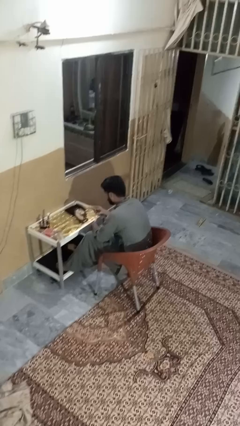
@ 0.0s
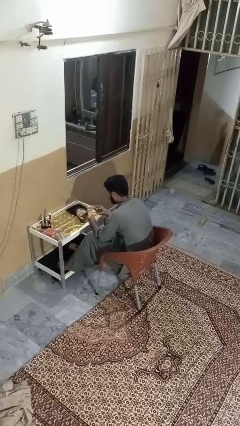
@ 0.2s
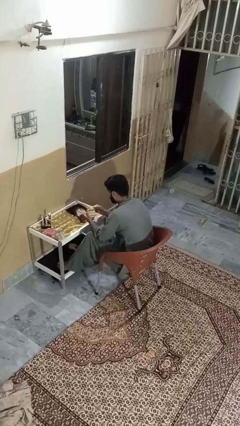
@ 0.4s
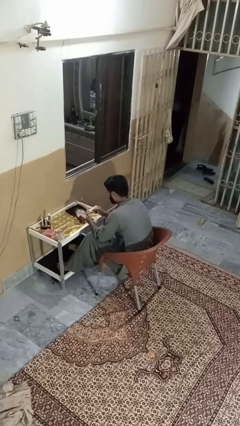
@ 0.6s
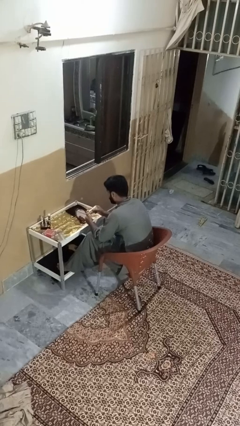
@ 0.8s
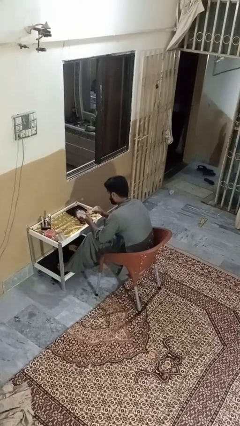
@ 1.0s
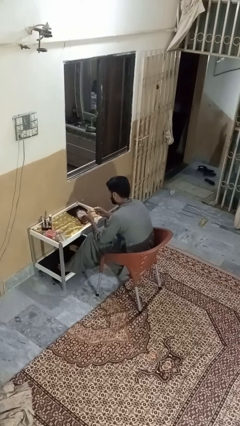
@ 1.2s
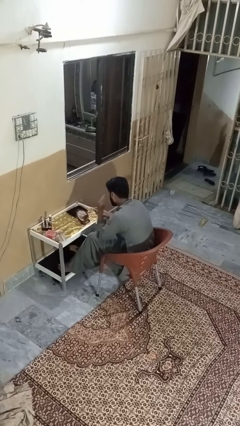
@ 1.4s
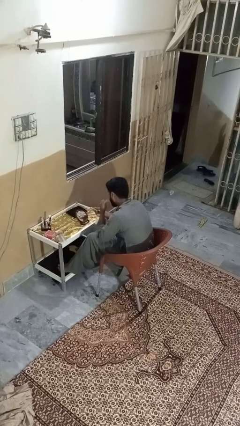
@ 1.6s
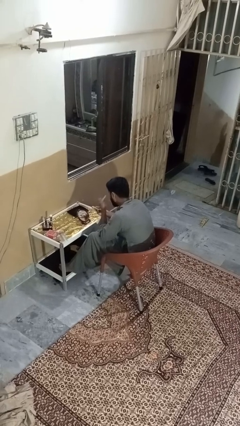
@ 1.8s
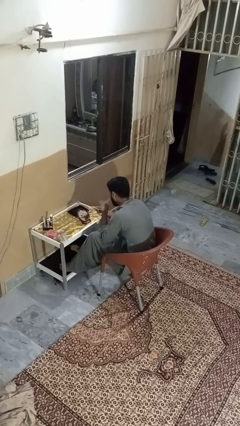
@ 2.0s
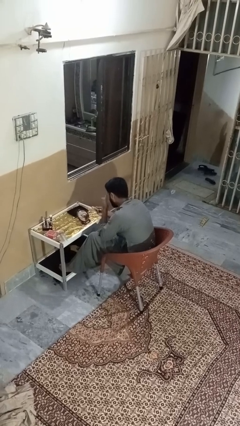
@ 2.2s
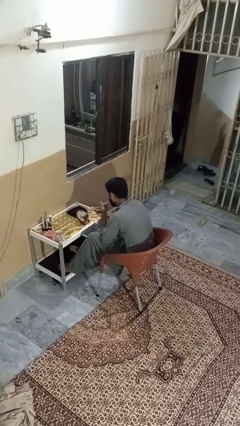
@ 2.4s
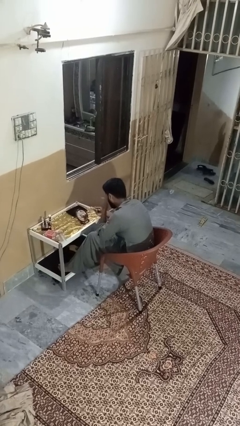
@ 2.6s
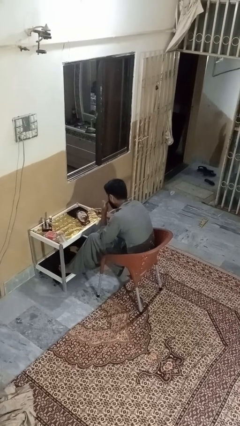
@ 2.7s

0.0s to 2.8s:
person applies foundation makeup

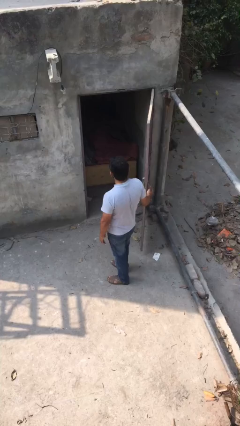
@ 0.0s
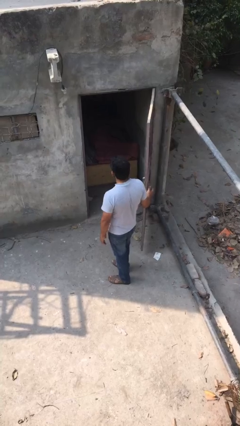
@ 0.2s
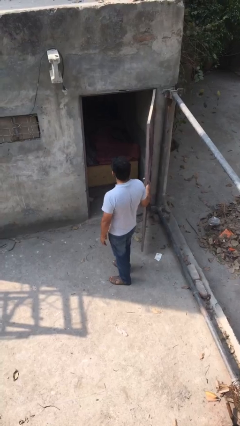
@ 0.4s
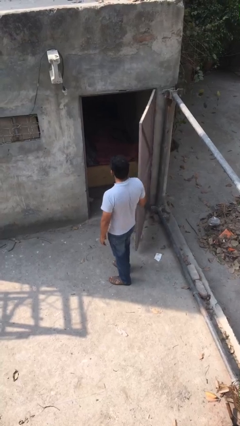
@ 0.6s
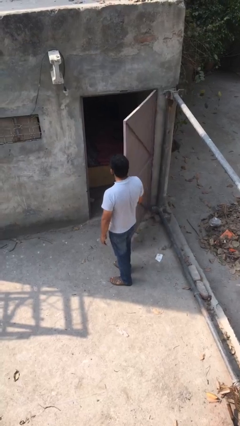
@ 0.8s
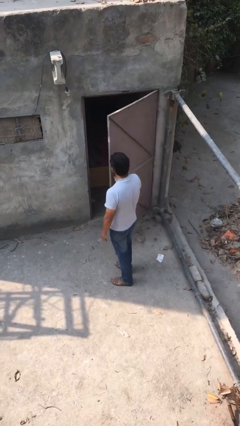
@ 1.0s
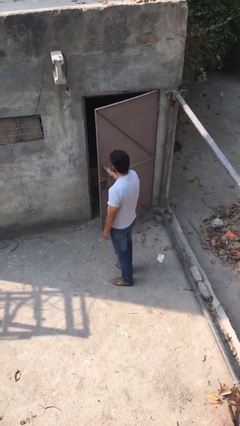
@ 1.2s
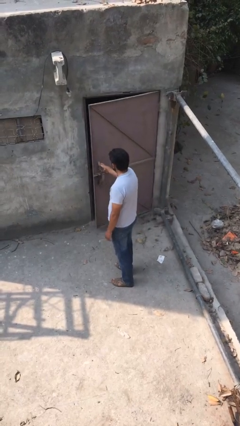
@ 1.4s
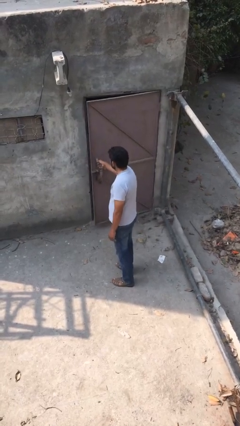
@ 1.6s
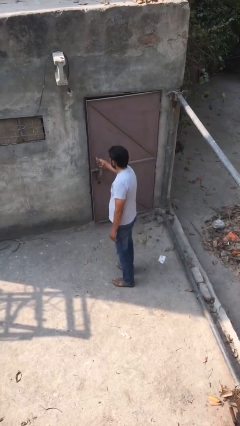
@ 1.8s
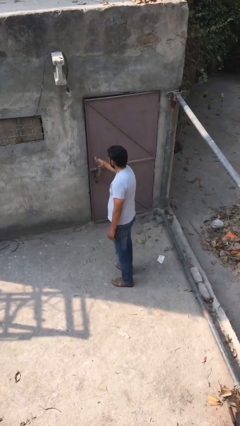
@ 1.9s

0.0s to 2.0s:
person closes facility door

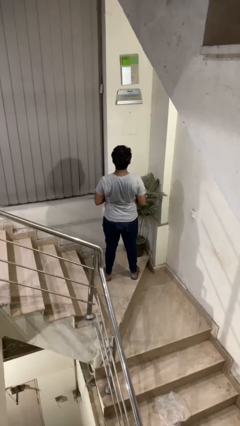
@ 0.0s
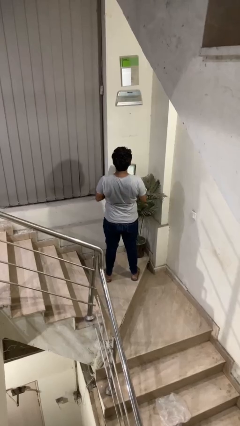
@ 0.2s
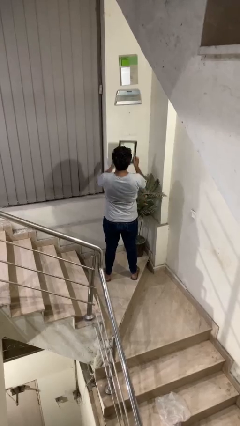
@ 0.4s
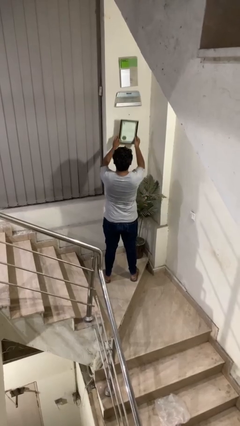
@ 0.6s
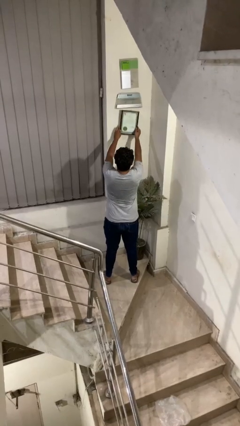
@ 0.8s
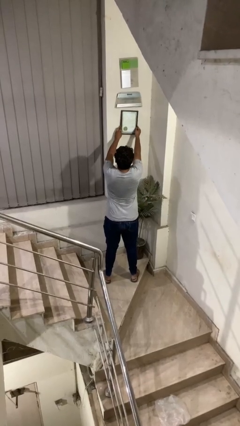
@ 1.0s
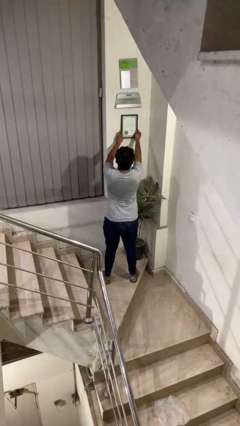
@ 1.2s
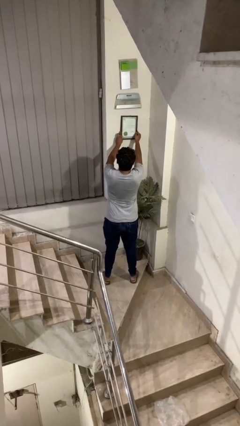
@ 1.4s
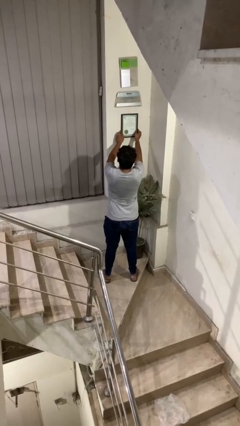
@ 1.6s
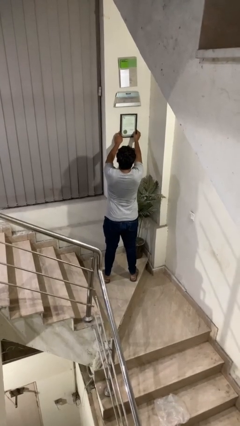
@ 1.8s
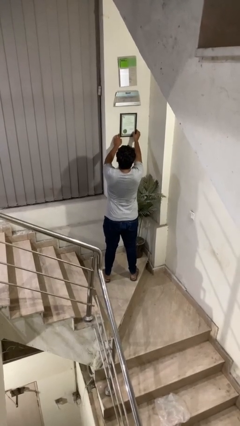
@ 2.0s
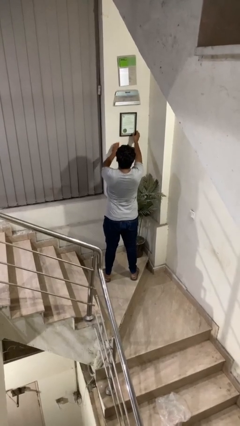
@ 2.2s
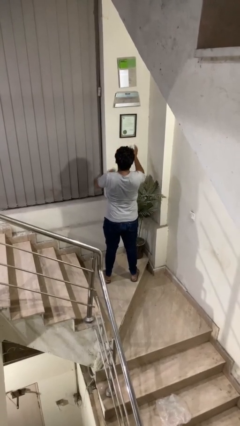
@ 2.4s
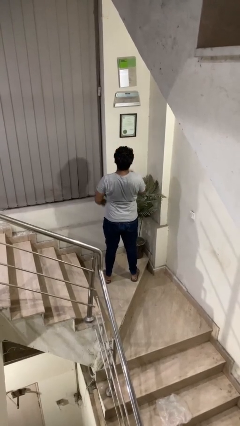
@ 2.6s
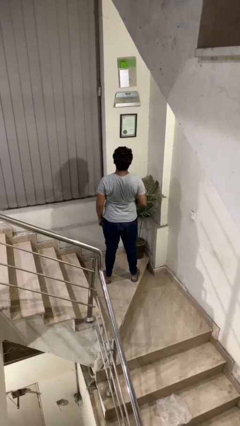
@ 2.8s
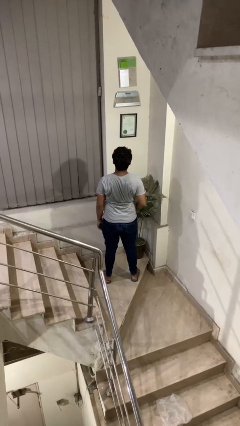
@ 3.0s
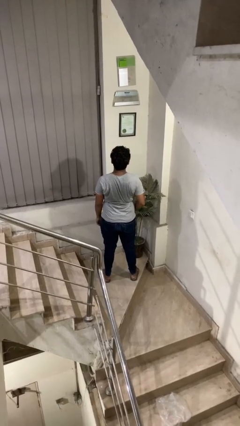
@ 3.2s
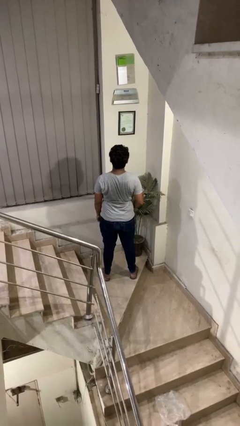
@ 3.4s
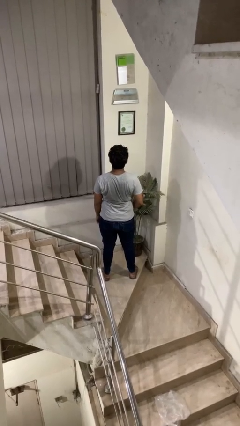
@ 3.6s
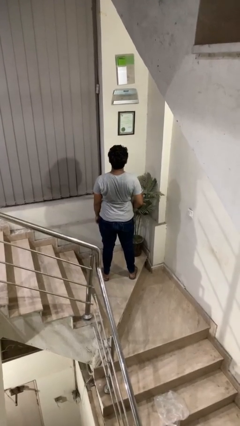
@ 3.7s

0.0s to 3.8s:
person puts up picture frame

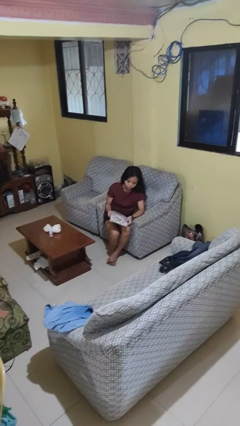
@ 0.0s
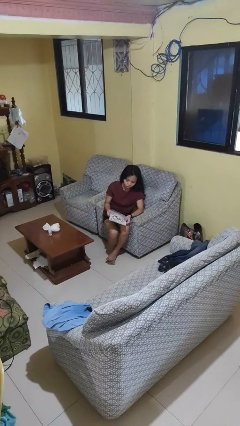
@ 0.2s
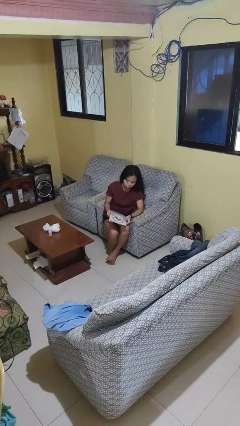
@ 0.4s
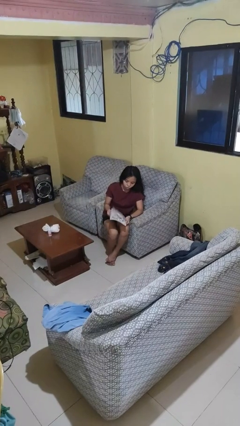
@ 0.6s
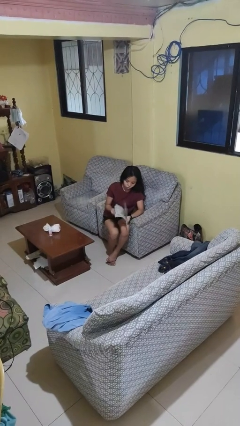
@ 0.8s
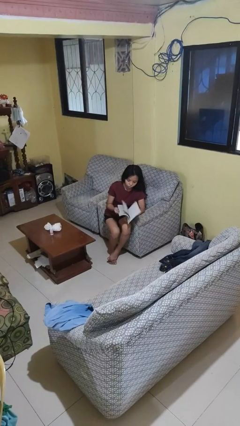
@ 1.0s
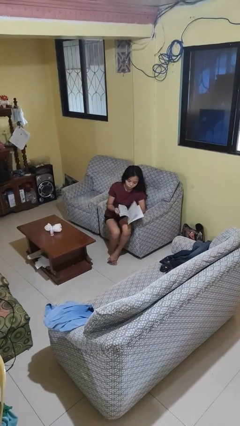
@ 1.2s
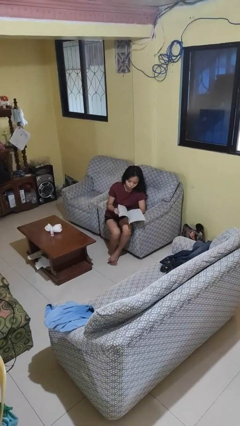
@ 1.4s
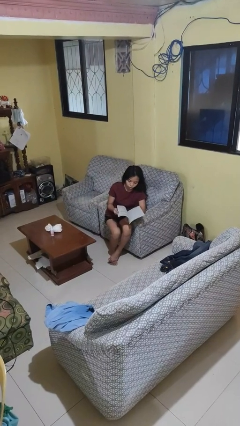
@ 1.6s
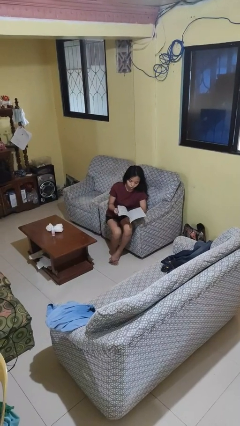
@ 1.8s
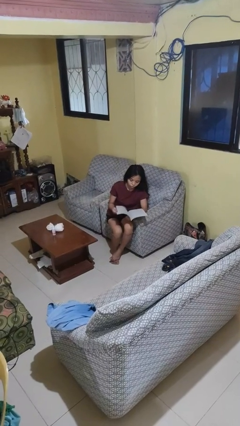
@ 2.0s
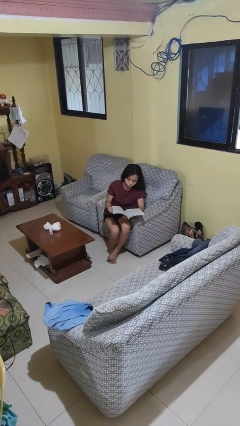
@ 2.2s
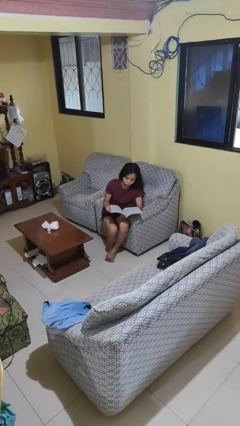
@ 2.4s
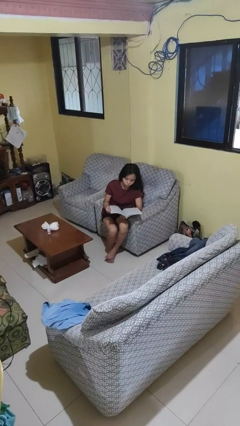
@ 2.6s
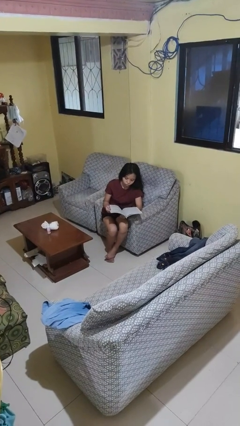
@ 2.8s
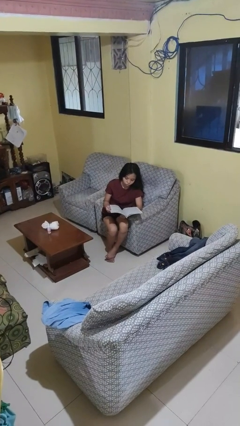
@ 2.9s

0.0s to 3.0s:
person reads book

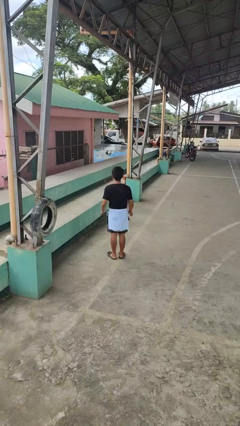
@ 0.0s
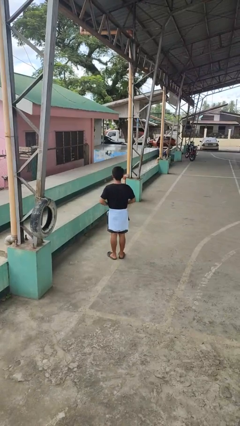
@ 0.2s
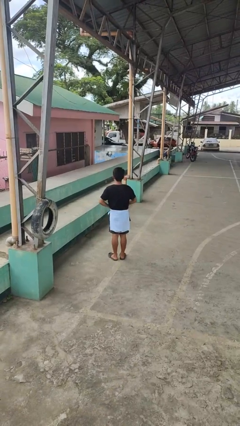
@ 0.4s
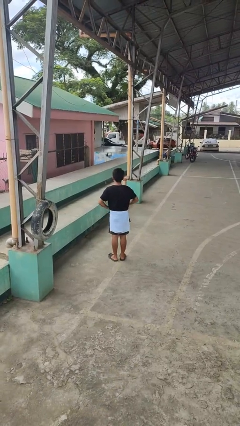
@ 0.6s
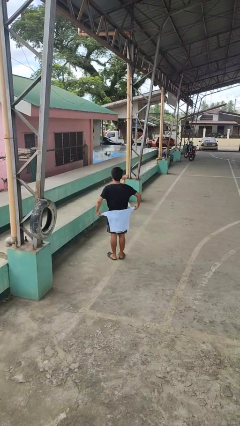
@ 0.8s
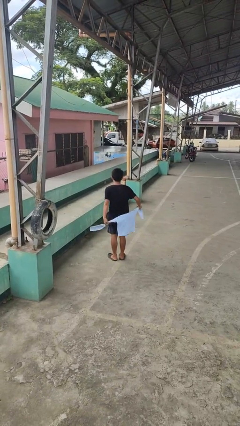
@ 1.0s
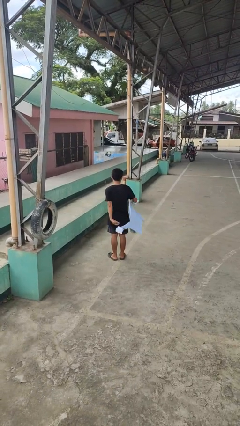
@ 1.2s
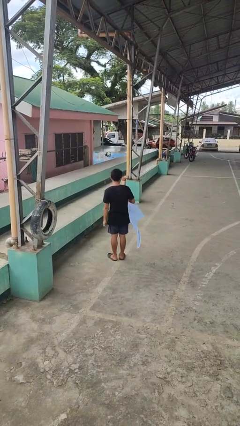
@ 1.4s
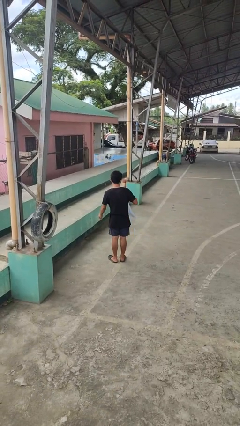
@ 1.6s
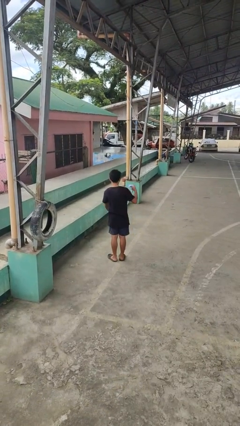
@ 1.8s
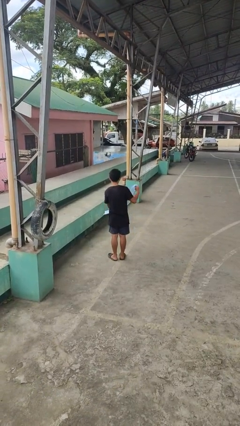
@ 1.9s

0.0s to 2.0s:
person unties jacket around waist

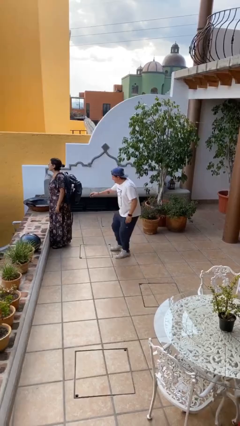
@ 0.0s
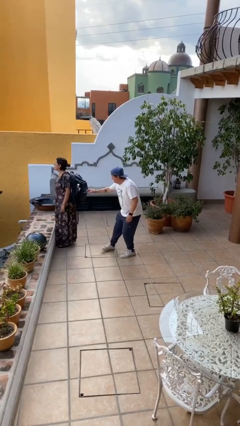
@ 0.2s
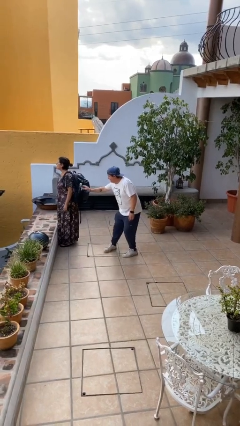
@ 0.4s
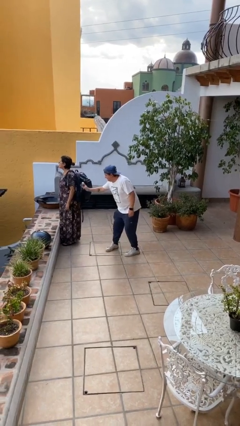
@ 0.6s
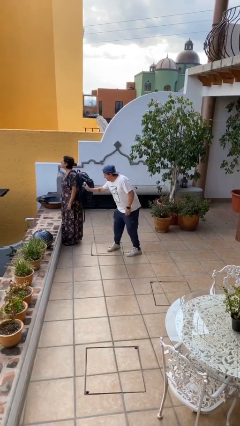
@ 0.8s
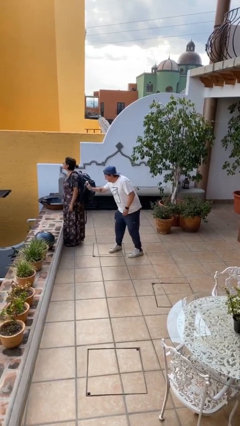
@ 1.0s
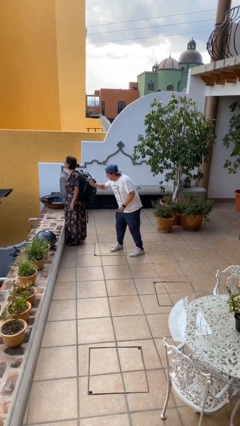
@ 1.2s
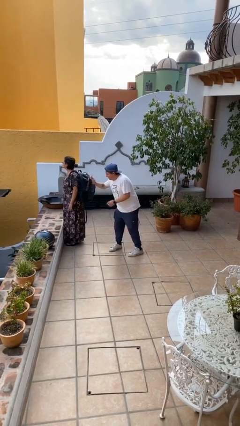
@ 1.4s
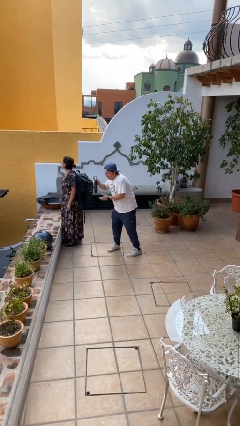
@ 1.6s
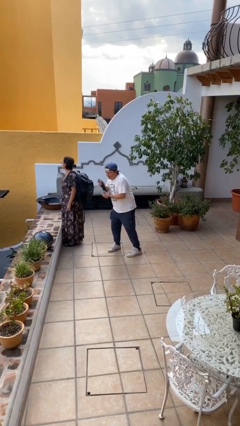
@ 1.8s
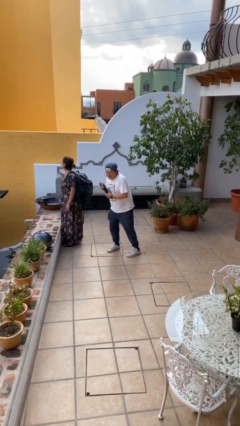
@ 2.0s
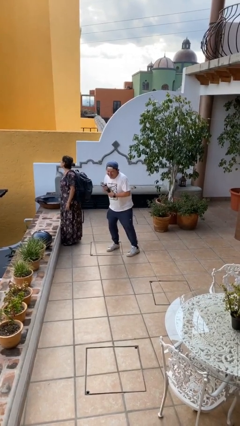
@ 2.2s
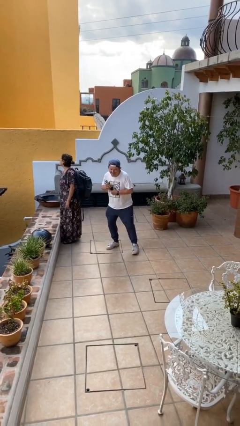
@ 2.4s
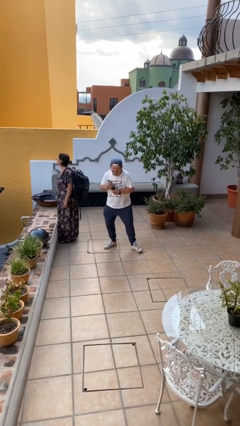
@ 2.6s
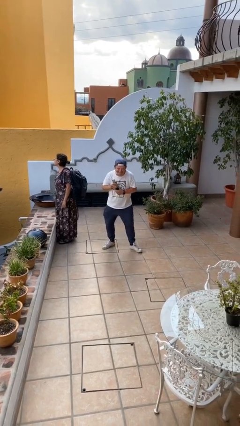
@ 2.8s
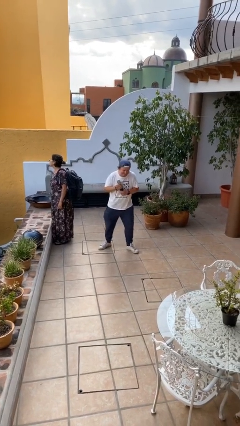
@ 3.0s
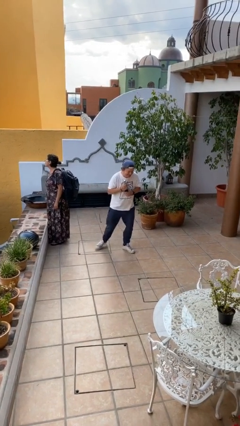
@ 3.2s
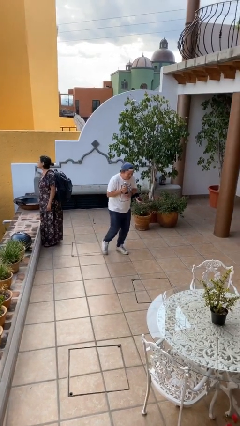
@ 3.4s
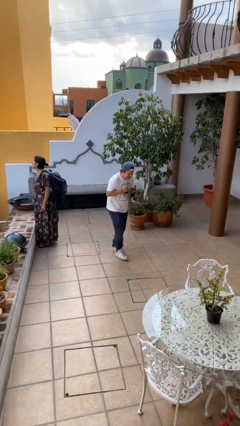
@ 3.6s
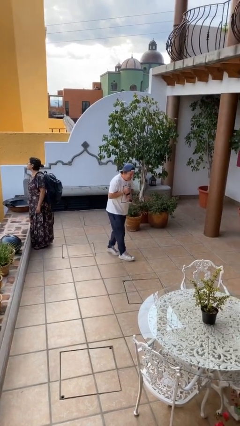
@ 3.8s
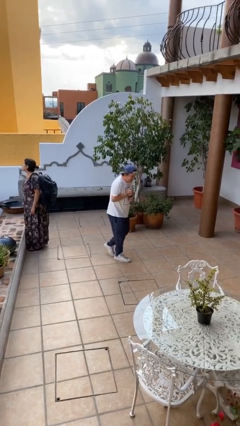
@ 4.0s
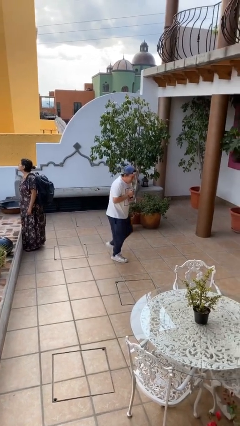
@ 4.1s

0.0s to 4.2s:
person steals object from person
